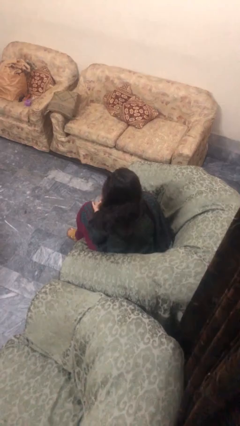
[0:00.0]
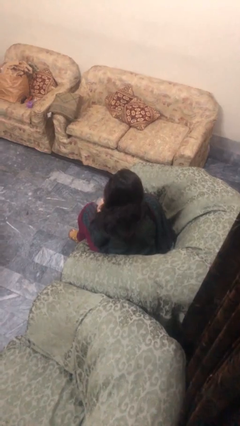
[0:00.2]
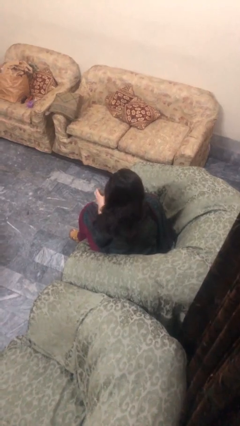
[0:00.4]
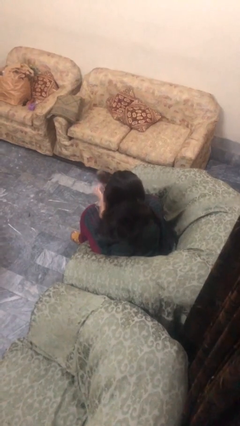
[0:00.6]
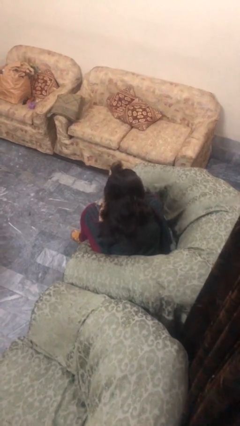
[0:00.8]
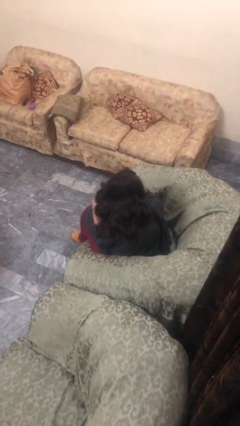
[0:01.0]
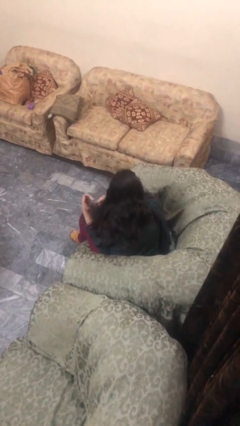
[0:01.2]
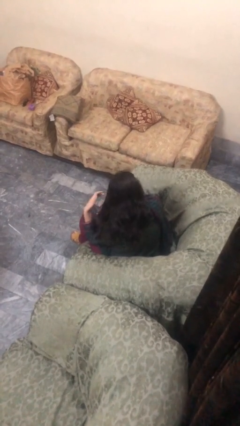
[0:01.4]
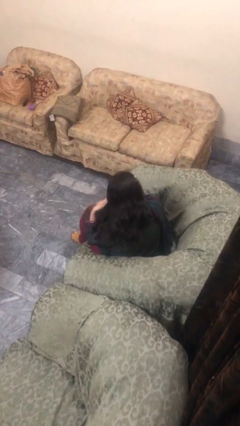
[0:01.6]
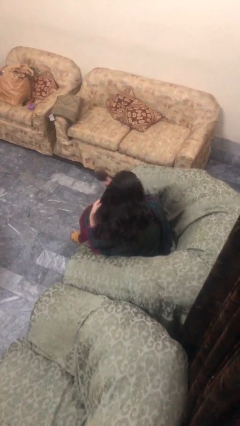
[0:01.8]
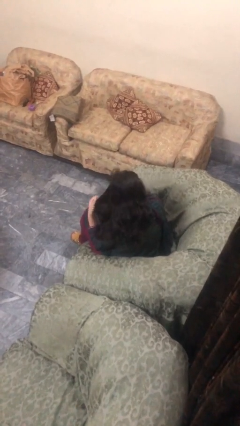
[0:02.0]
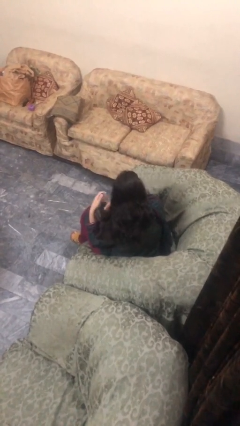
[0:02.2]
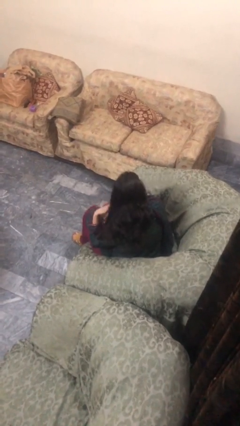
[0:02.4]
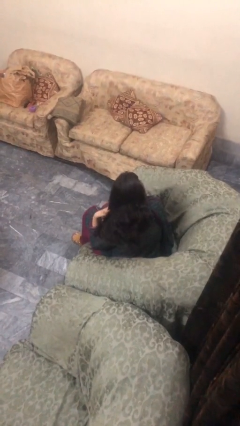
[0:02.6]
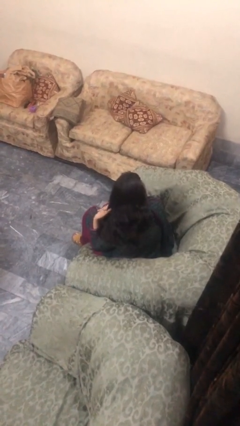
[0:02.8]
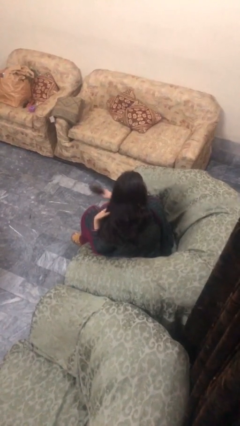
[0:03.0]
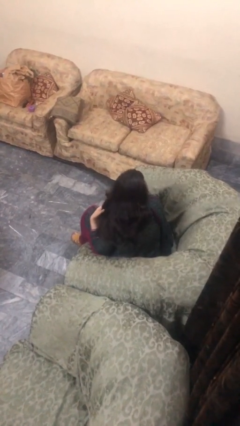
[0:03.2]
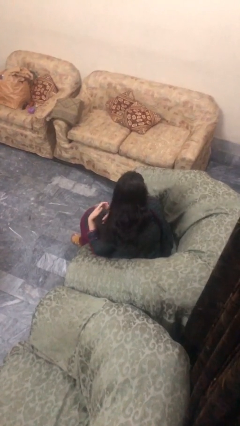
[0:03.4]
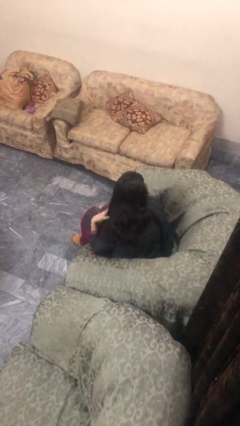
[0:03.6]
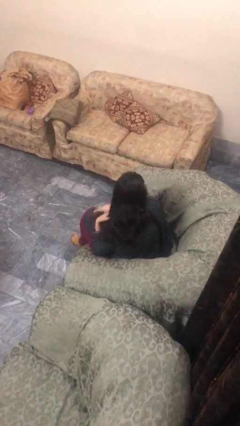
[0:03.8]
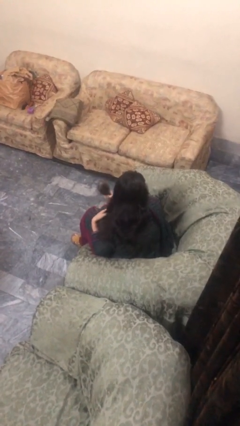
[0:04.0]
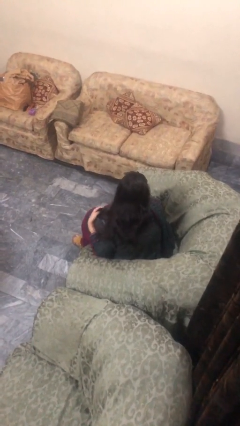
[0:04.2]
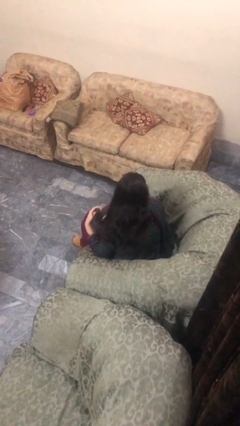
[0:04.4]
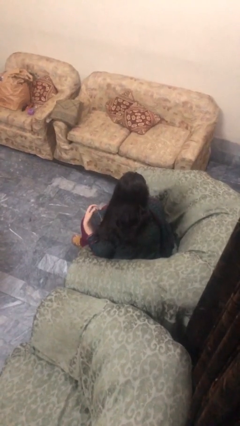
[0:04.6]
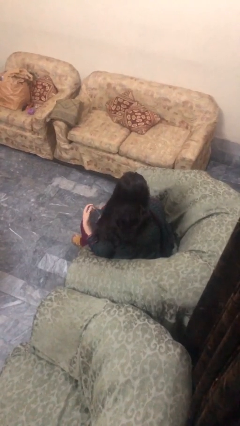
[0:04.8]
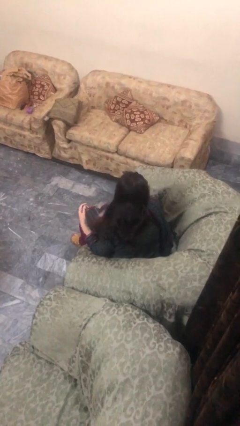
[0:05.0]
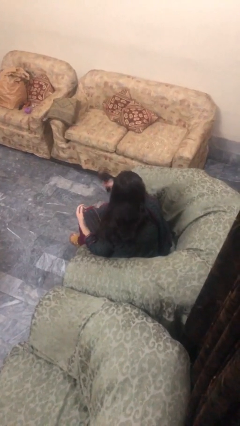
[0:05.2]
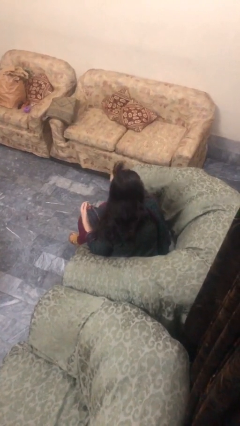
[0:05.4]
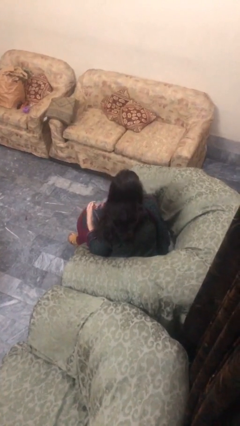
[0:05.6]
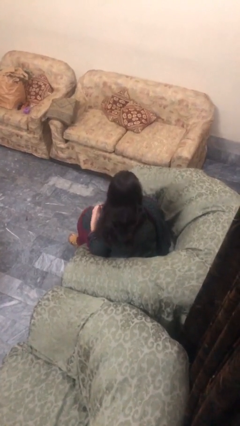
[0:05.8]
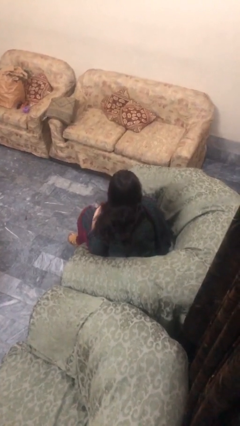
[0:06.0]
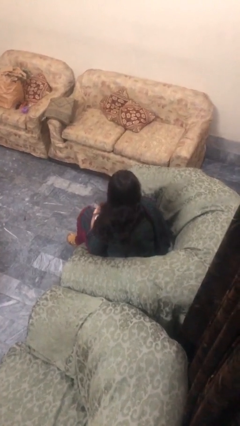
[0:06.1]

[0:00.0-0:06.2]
person brushes hair

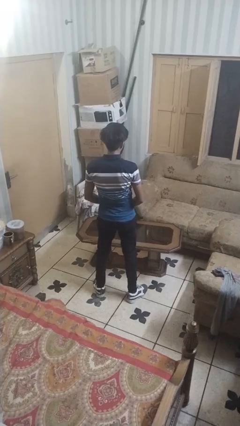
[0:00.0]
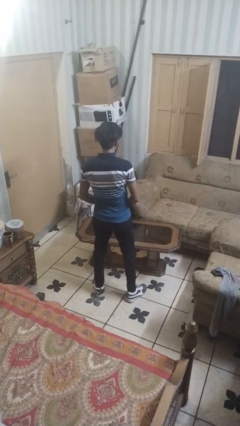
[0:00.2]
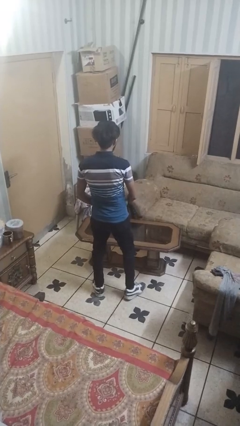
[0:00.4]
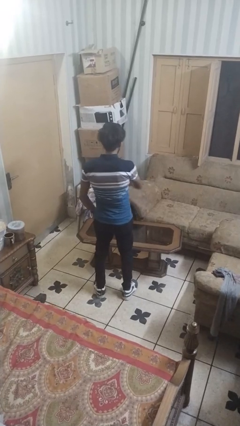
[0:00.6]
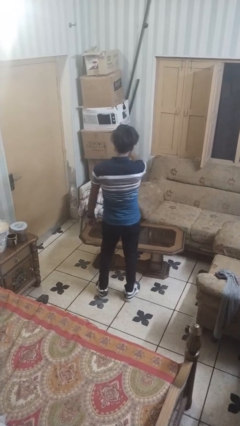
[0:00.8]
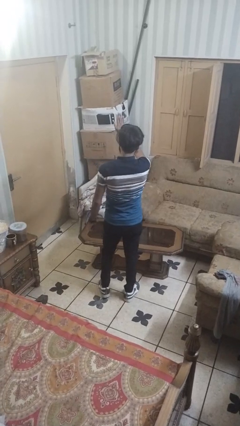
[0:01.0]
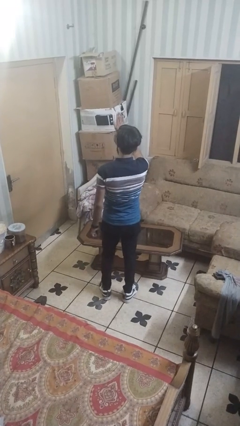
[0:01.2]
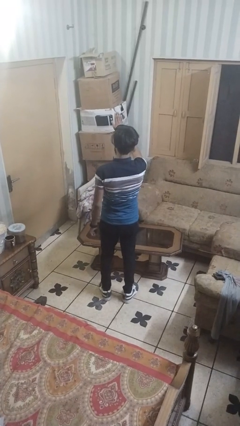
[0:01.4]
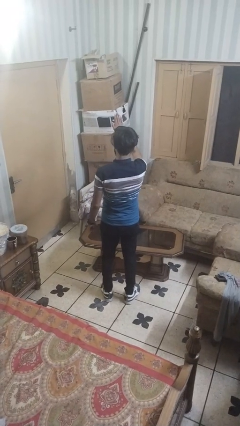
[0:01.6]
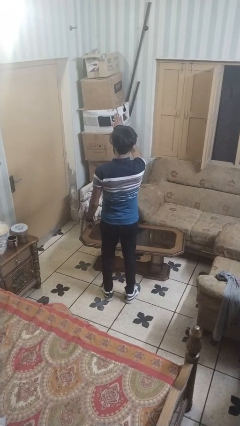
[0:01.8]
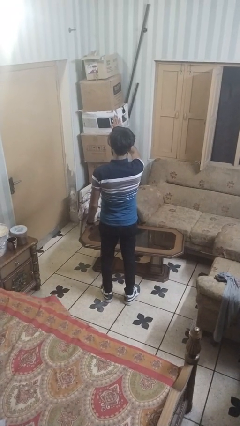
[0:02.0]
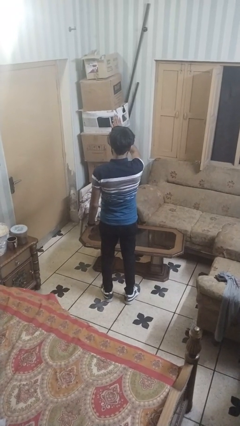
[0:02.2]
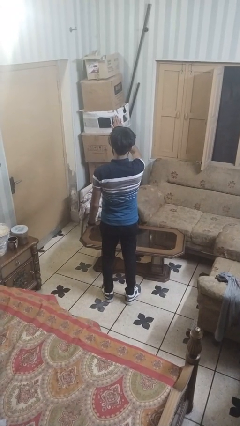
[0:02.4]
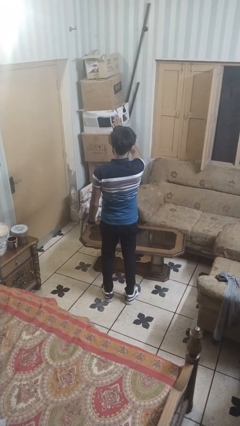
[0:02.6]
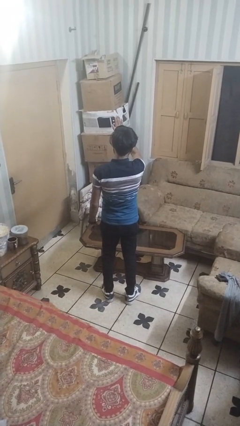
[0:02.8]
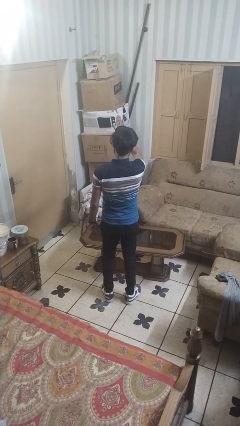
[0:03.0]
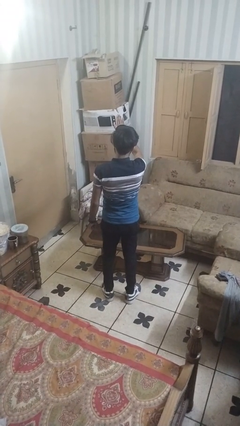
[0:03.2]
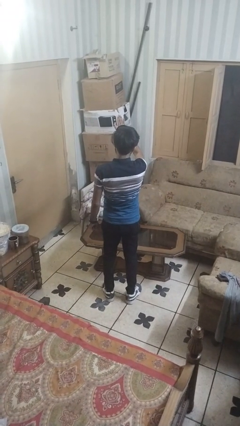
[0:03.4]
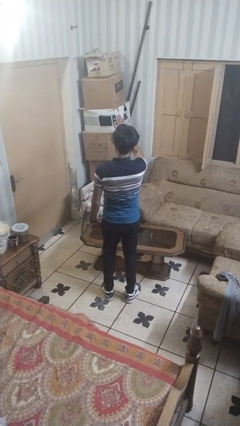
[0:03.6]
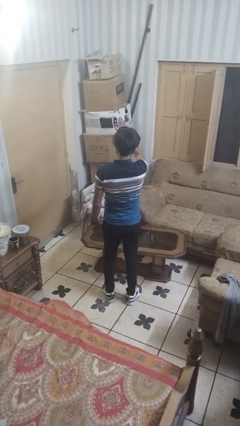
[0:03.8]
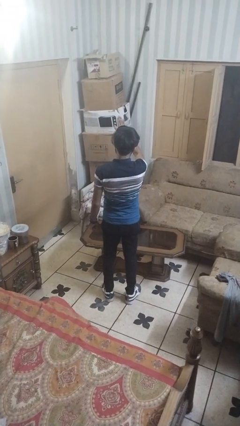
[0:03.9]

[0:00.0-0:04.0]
person gestures stop

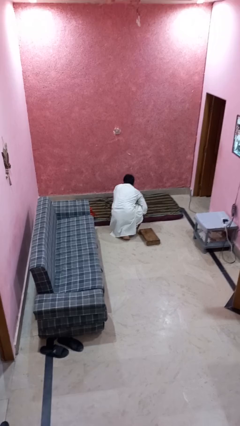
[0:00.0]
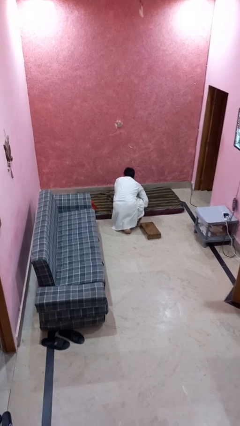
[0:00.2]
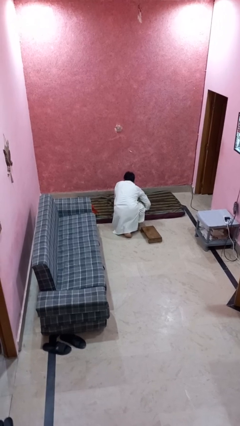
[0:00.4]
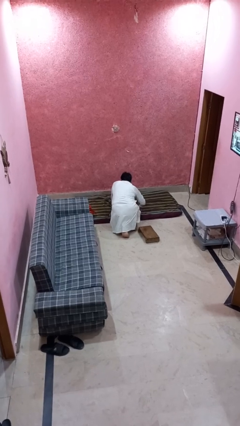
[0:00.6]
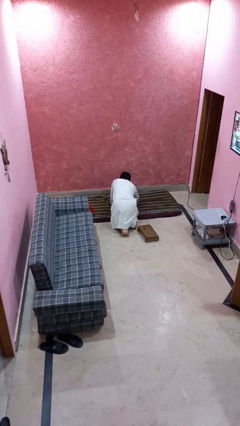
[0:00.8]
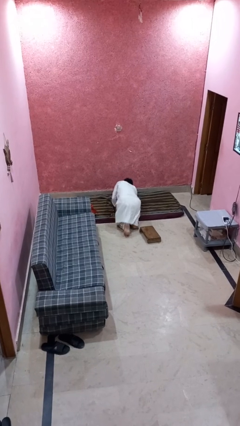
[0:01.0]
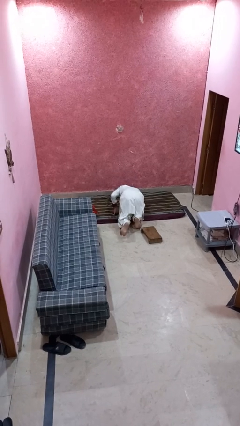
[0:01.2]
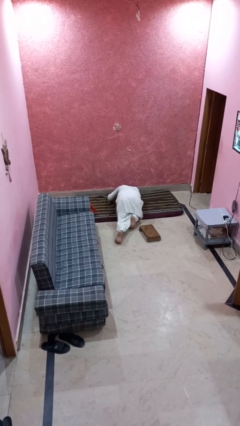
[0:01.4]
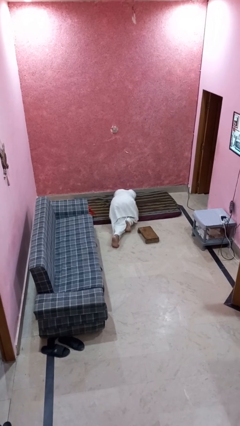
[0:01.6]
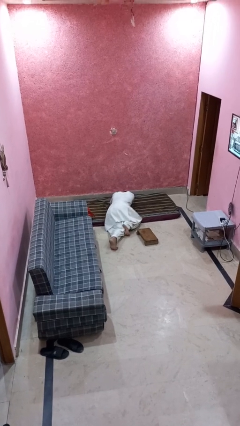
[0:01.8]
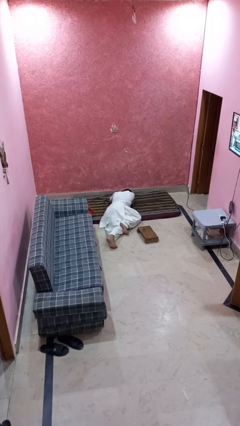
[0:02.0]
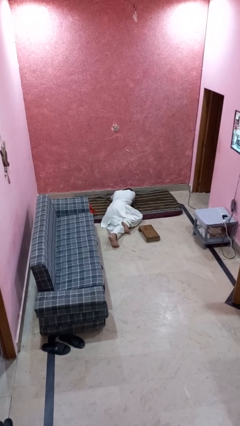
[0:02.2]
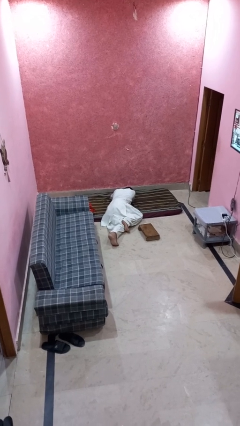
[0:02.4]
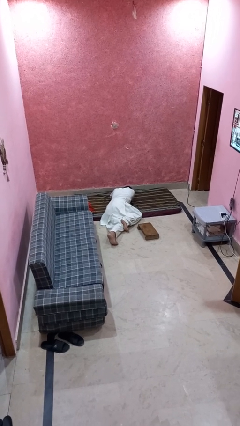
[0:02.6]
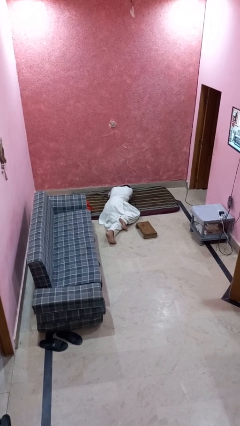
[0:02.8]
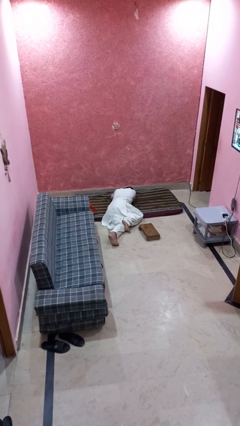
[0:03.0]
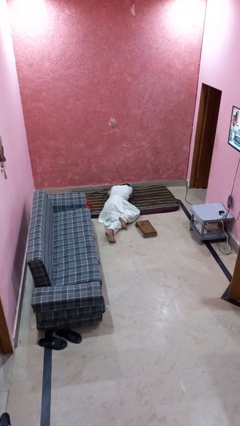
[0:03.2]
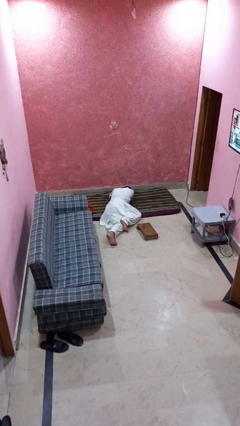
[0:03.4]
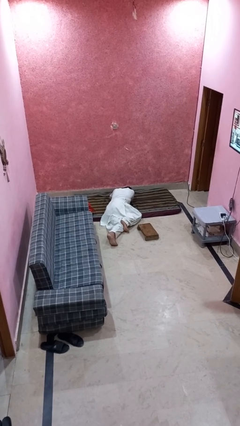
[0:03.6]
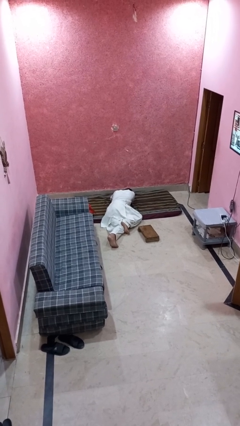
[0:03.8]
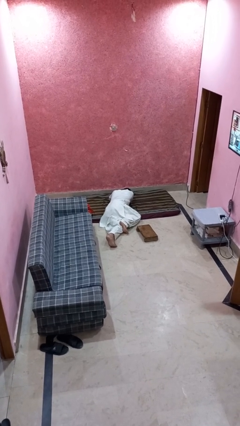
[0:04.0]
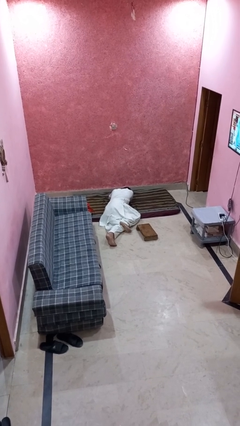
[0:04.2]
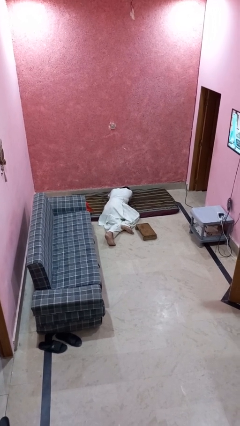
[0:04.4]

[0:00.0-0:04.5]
person lies down on floor

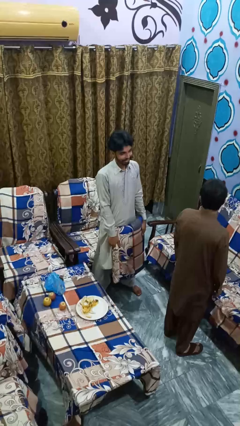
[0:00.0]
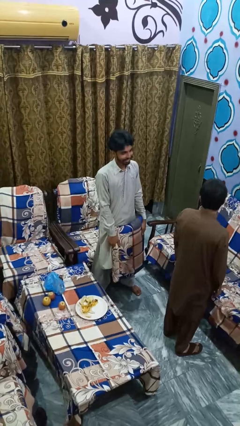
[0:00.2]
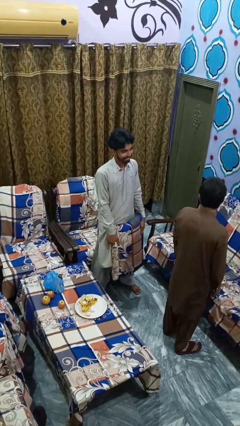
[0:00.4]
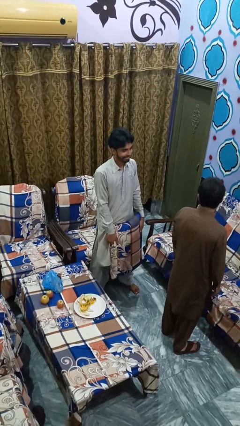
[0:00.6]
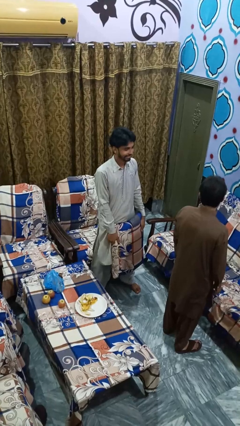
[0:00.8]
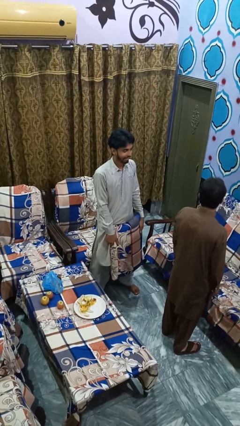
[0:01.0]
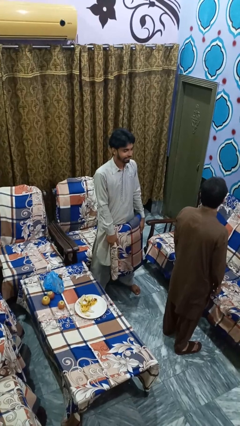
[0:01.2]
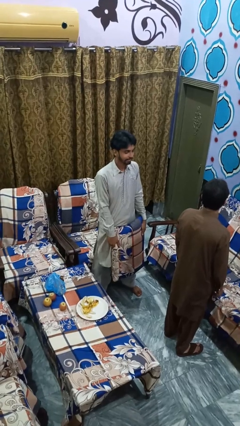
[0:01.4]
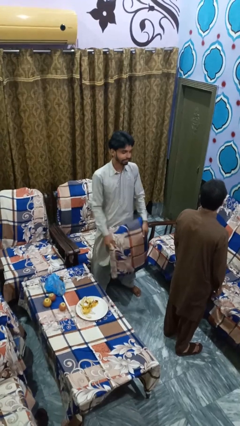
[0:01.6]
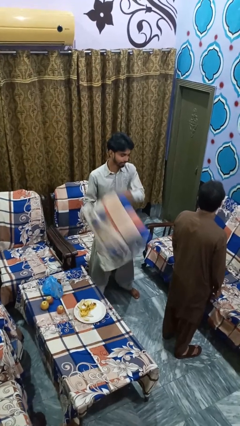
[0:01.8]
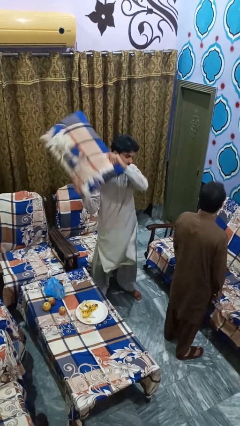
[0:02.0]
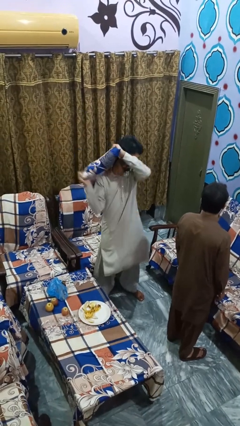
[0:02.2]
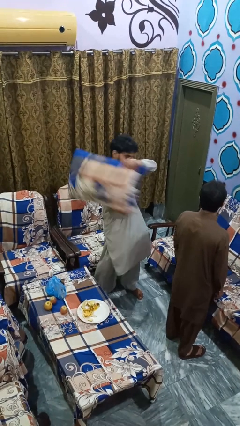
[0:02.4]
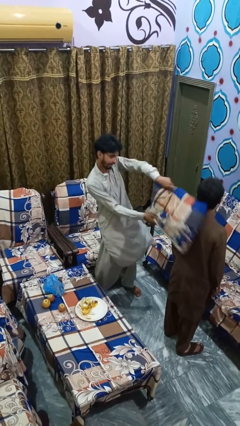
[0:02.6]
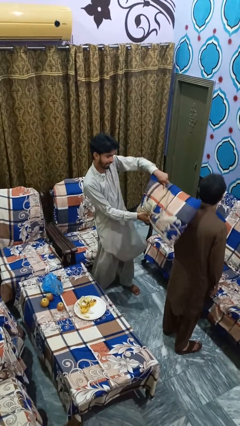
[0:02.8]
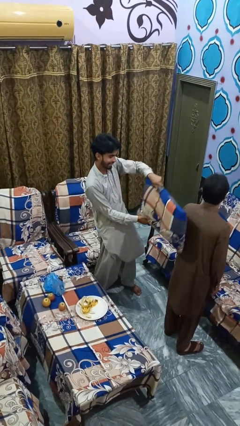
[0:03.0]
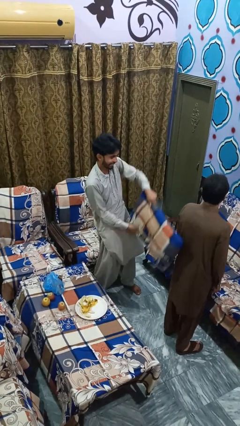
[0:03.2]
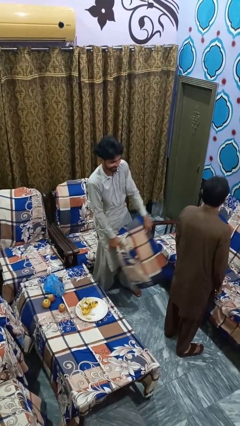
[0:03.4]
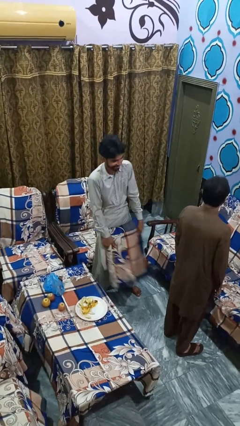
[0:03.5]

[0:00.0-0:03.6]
person hits person with pillow
